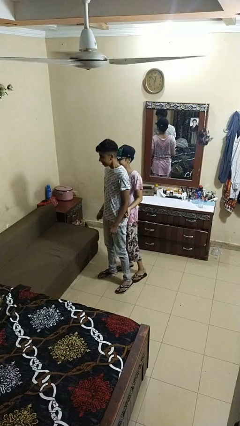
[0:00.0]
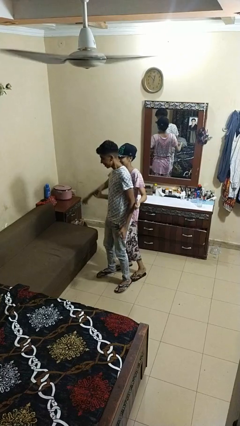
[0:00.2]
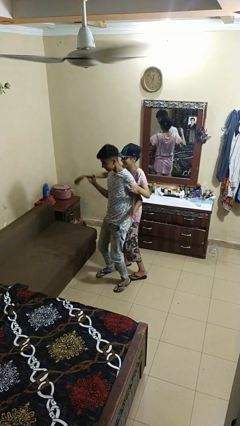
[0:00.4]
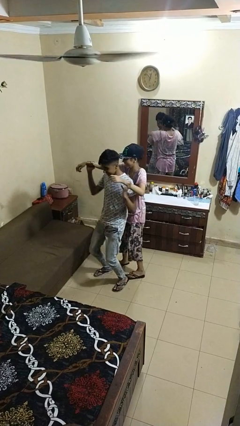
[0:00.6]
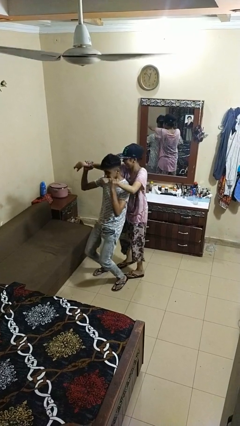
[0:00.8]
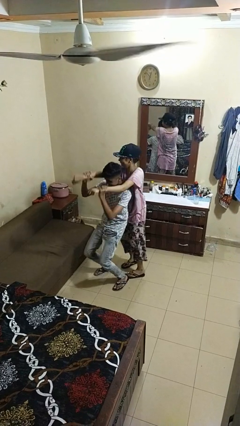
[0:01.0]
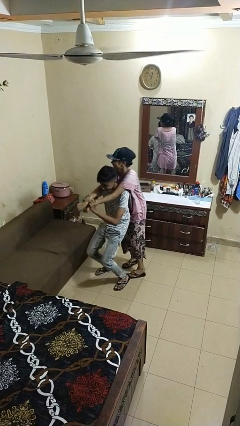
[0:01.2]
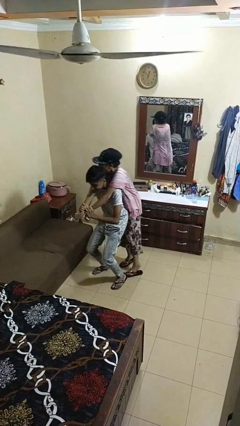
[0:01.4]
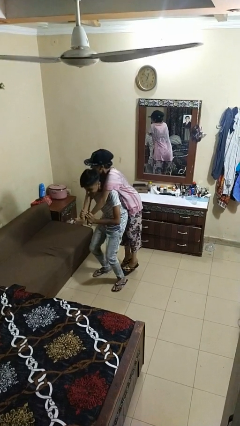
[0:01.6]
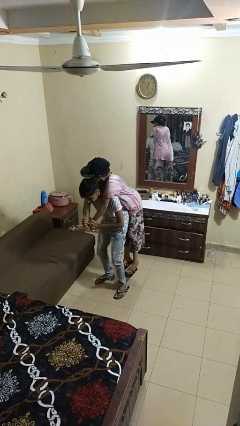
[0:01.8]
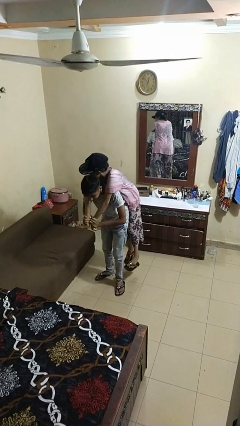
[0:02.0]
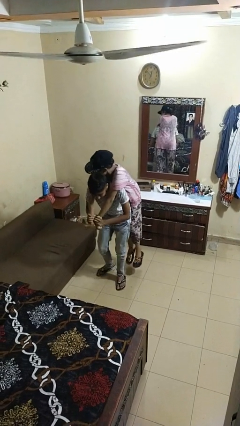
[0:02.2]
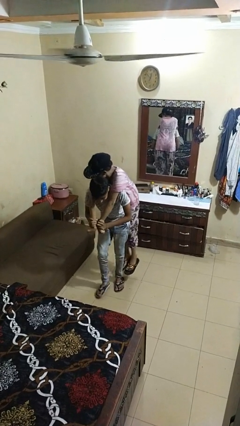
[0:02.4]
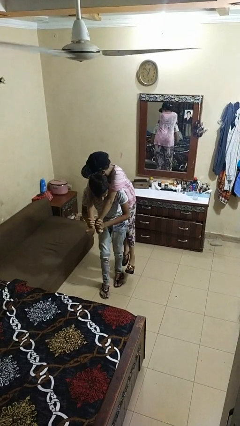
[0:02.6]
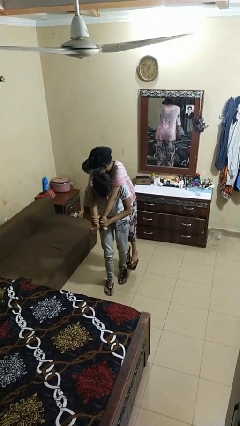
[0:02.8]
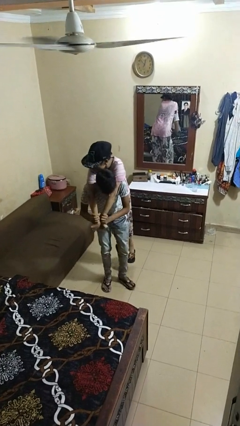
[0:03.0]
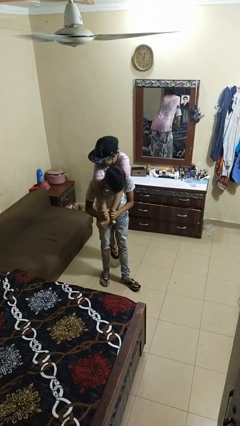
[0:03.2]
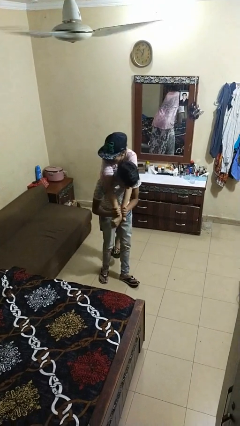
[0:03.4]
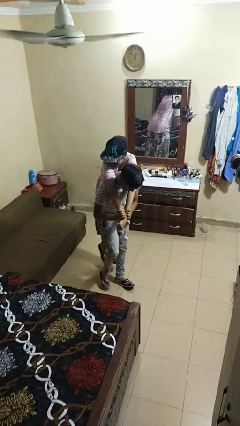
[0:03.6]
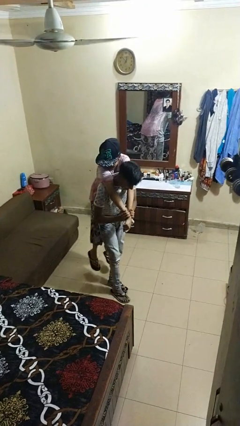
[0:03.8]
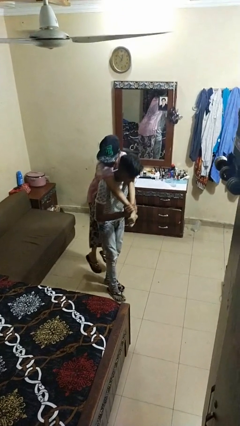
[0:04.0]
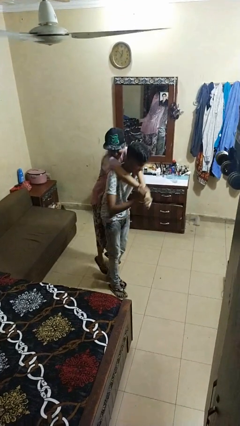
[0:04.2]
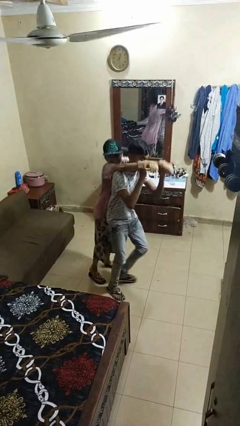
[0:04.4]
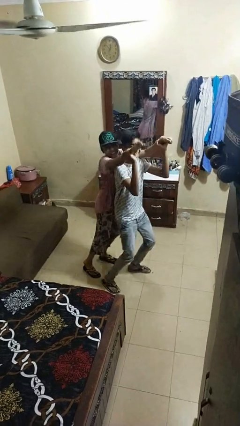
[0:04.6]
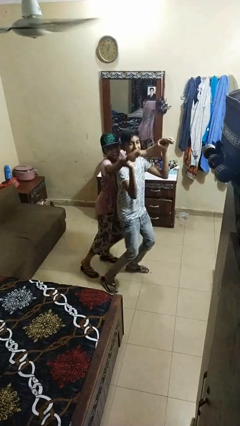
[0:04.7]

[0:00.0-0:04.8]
person carries person on back

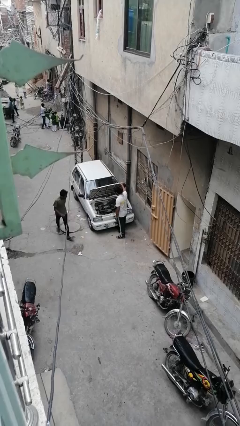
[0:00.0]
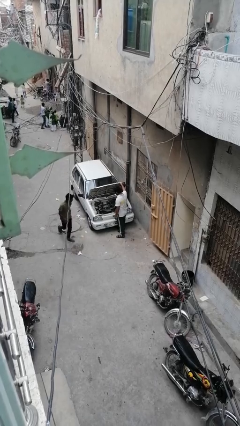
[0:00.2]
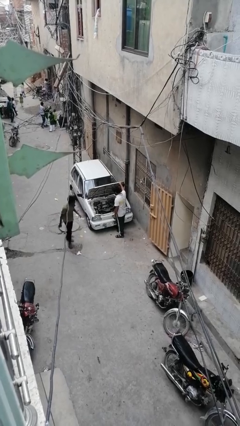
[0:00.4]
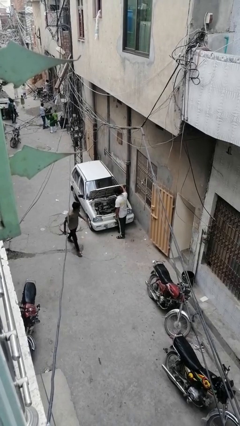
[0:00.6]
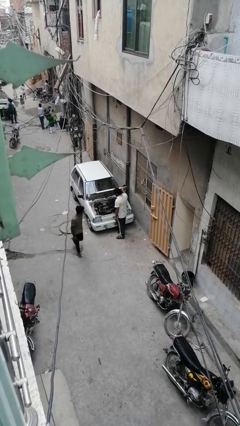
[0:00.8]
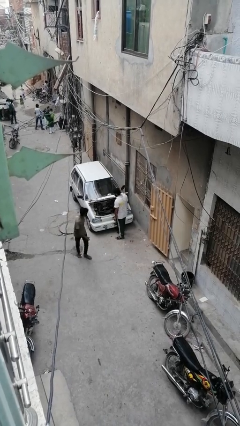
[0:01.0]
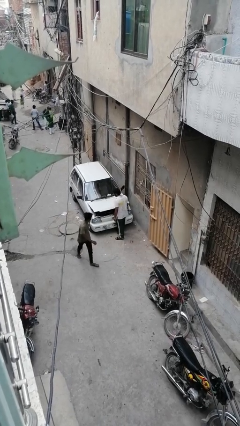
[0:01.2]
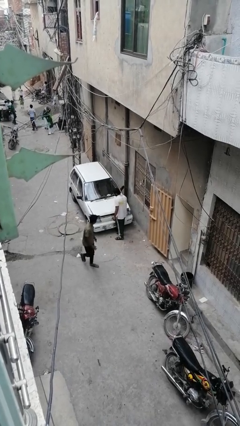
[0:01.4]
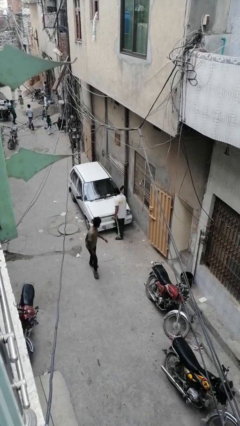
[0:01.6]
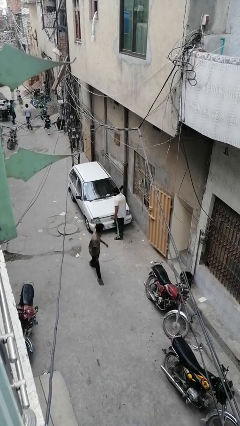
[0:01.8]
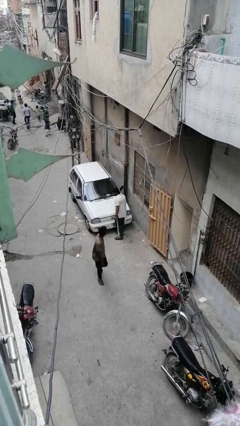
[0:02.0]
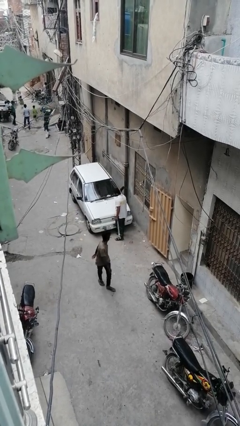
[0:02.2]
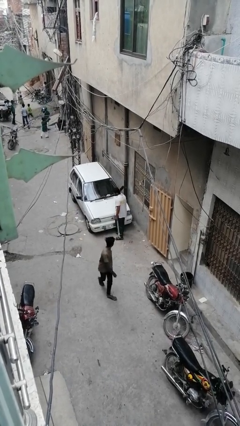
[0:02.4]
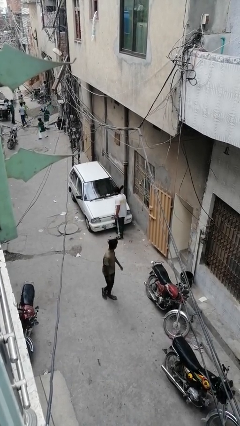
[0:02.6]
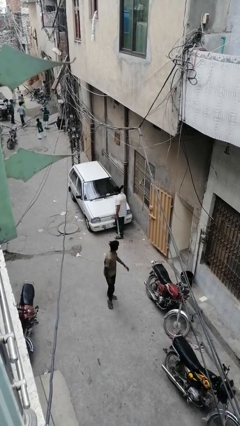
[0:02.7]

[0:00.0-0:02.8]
person closes car hood

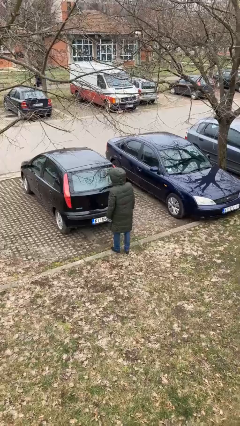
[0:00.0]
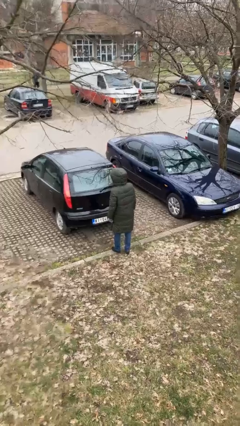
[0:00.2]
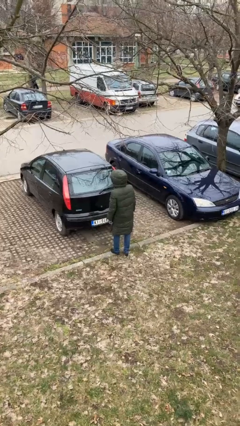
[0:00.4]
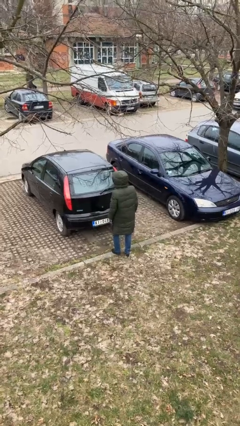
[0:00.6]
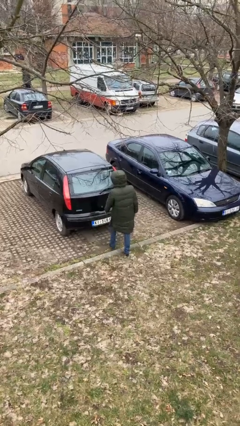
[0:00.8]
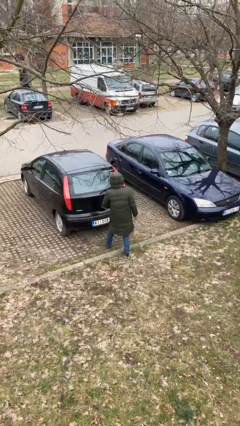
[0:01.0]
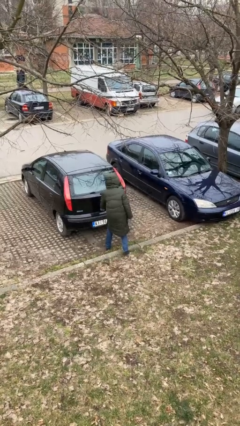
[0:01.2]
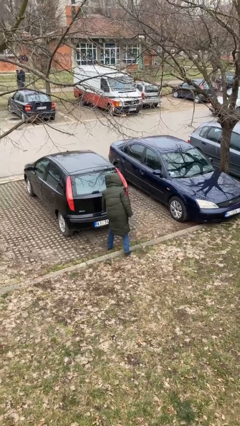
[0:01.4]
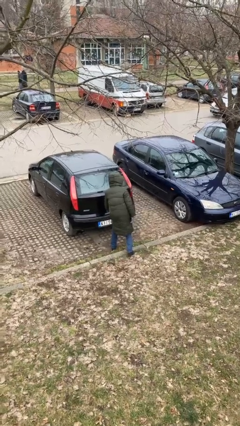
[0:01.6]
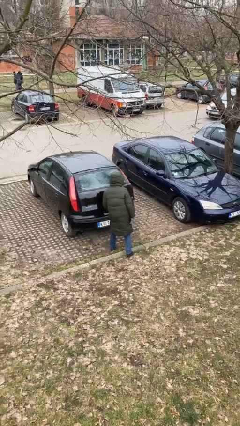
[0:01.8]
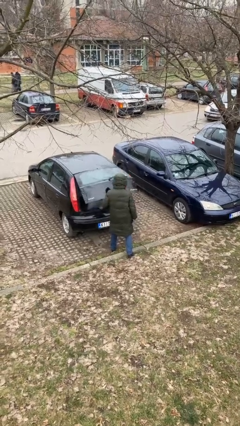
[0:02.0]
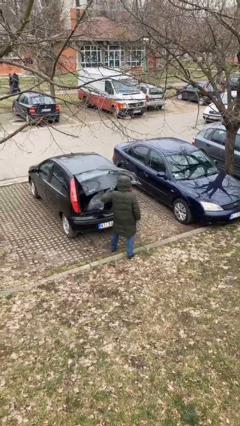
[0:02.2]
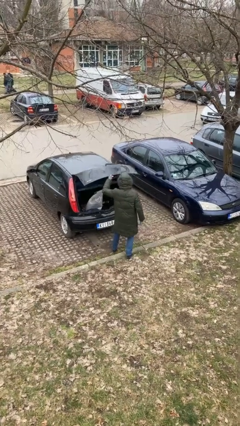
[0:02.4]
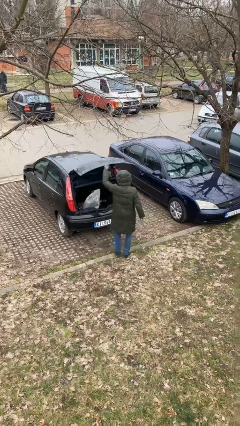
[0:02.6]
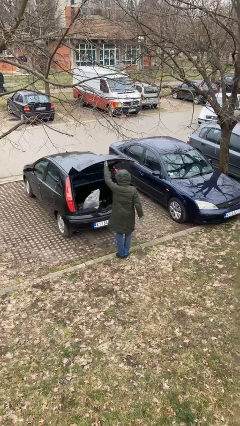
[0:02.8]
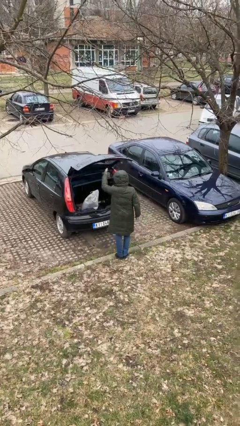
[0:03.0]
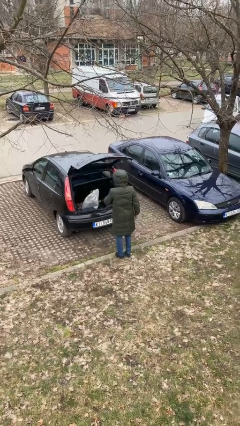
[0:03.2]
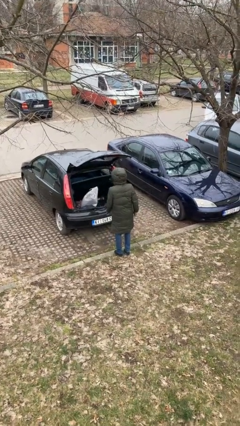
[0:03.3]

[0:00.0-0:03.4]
person opens car trunk

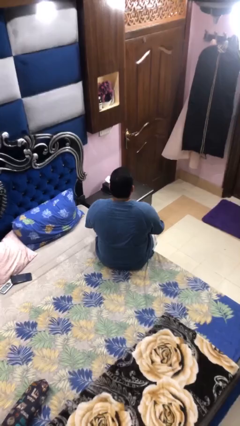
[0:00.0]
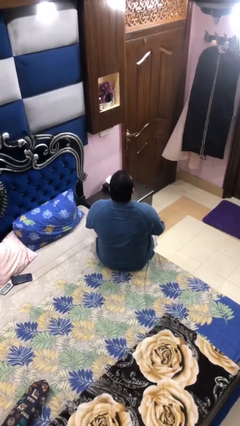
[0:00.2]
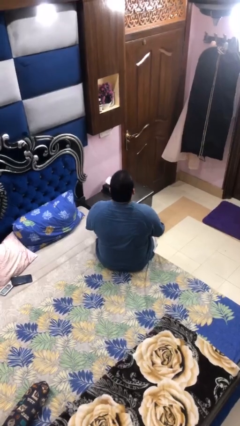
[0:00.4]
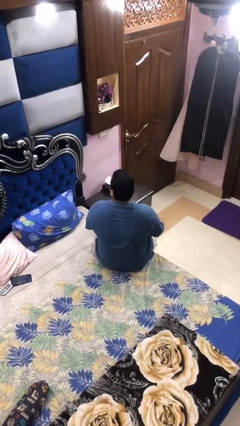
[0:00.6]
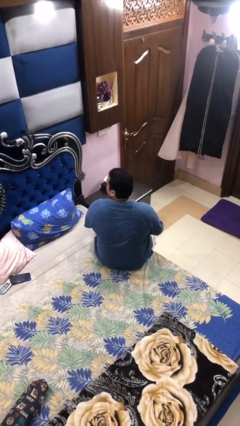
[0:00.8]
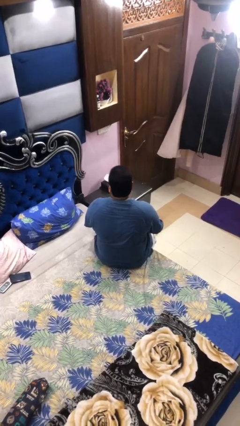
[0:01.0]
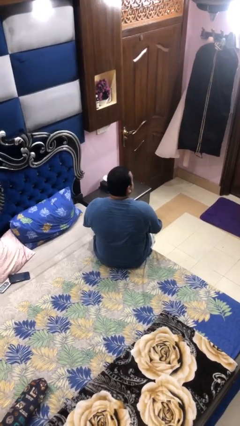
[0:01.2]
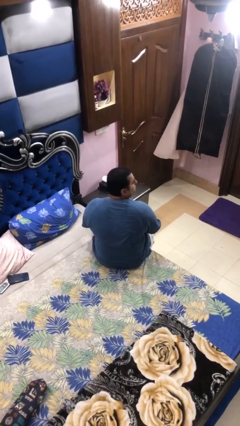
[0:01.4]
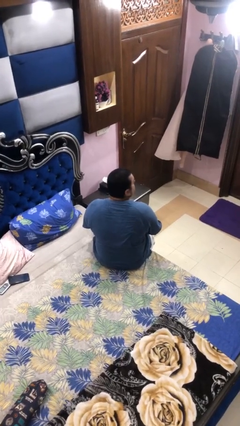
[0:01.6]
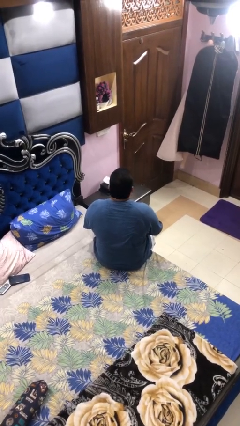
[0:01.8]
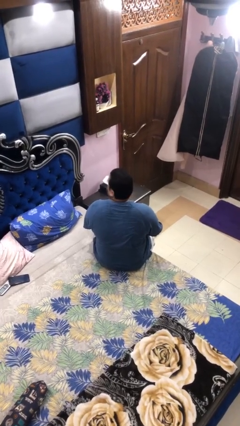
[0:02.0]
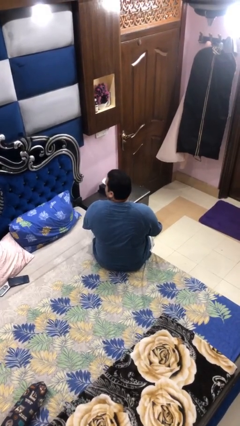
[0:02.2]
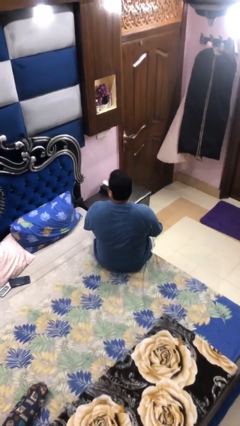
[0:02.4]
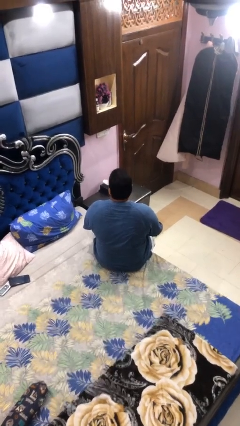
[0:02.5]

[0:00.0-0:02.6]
person shakes head

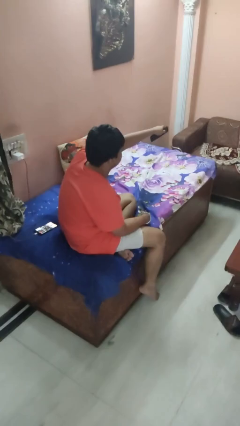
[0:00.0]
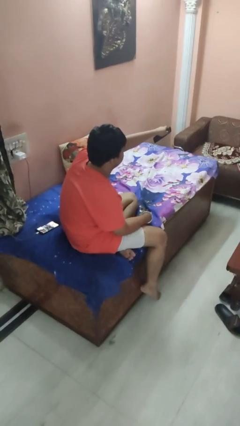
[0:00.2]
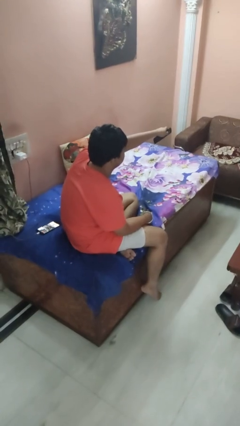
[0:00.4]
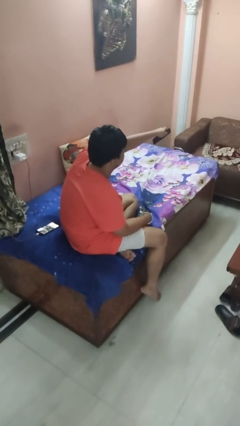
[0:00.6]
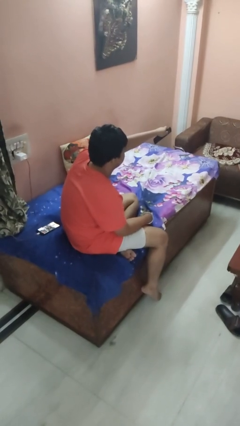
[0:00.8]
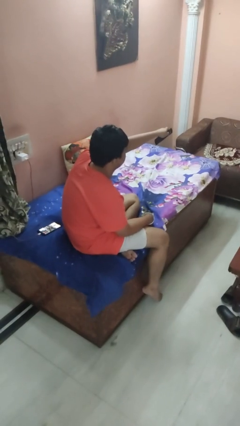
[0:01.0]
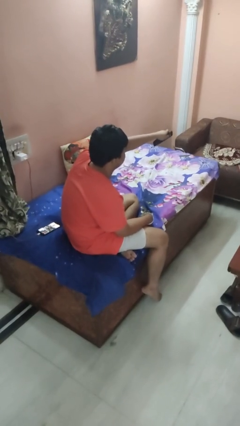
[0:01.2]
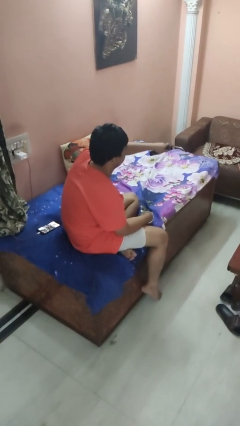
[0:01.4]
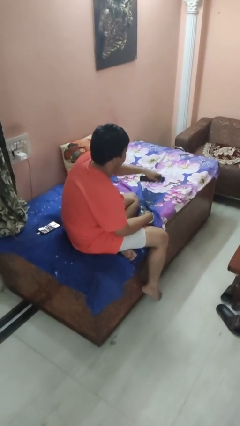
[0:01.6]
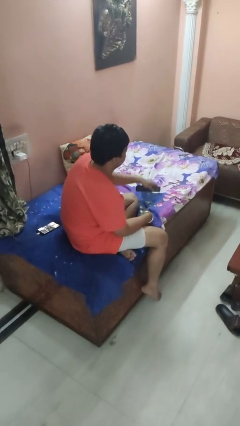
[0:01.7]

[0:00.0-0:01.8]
person uses television remote

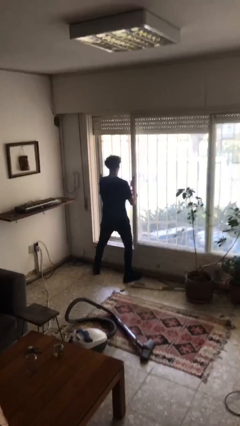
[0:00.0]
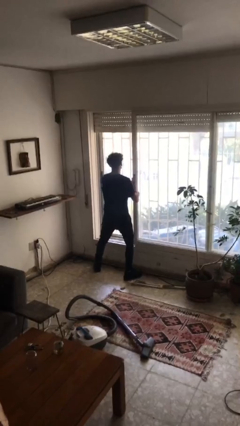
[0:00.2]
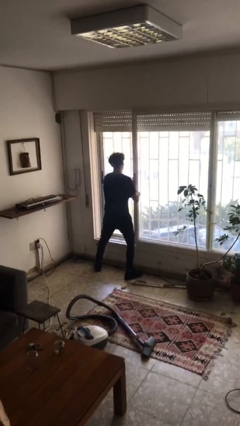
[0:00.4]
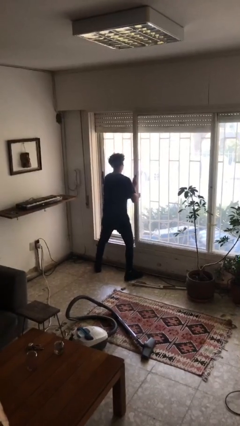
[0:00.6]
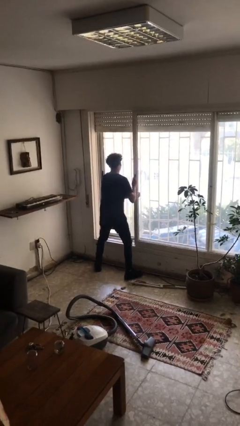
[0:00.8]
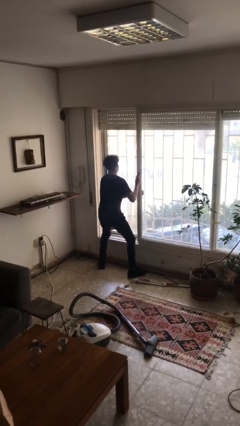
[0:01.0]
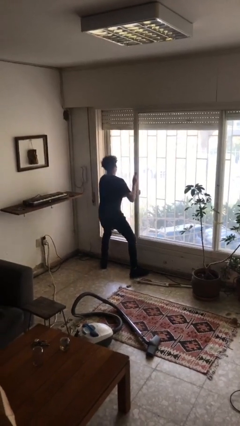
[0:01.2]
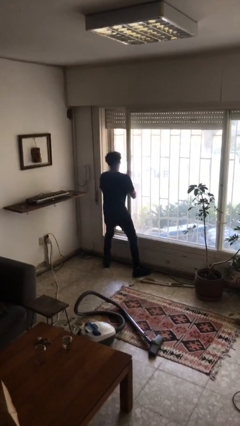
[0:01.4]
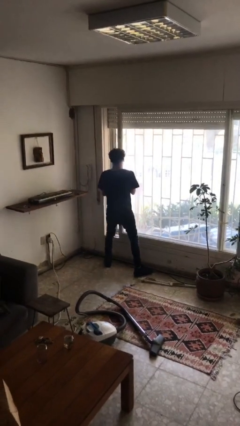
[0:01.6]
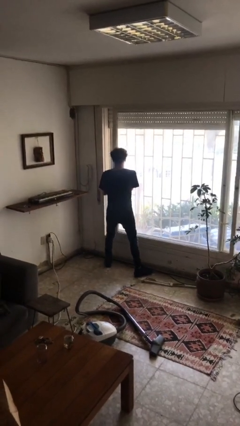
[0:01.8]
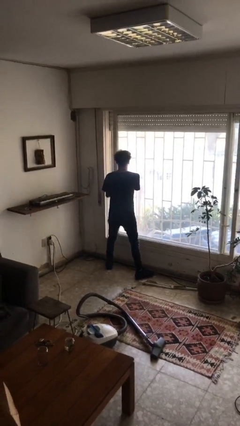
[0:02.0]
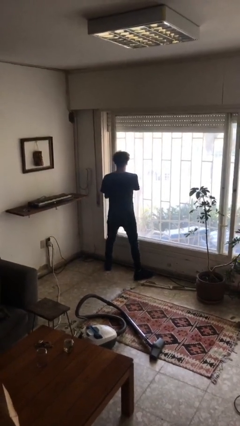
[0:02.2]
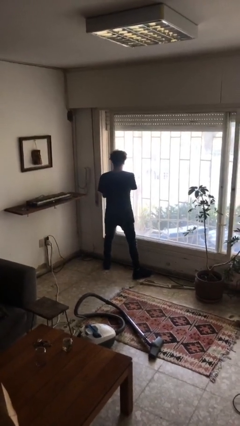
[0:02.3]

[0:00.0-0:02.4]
person closes sliding door
